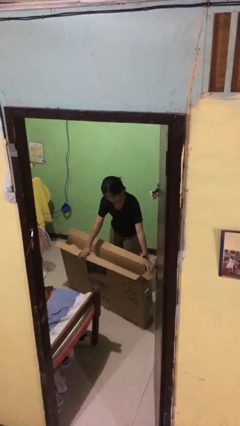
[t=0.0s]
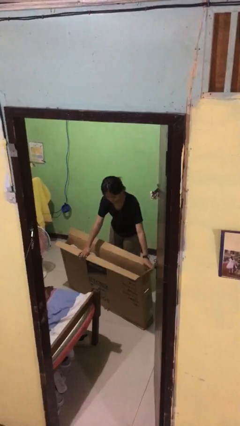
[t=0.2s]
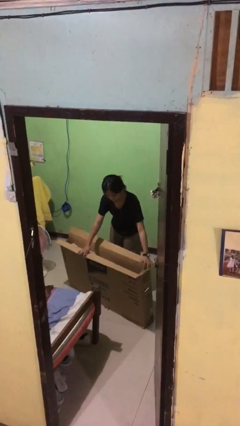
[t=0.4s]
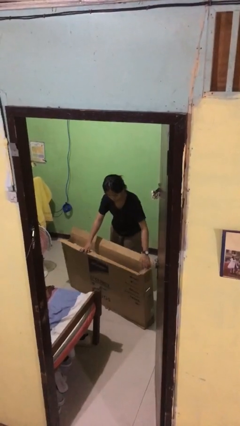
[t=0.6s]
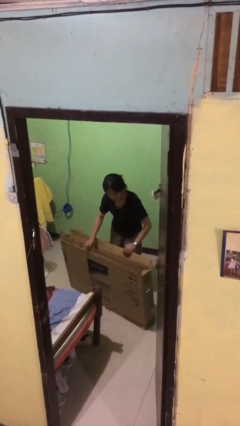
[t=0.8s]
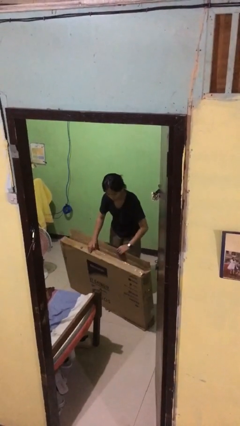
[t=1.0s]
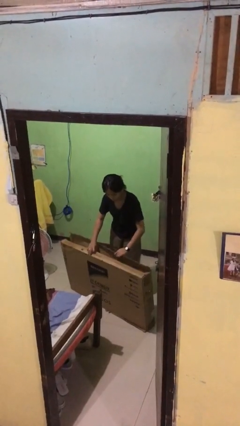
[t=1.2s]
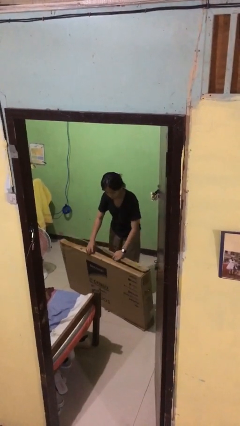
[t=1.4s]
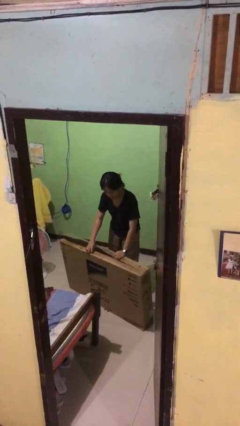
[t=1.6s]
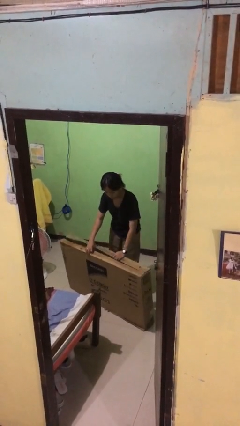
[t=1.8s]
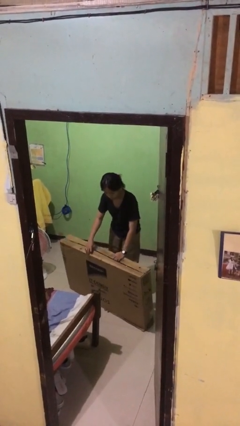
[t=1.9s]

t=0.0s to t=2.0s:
person closes box

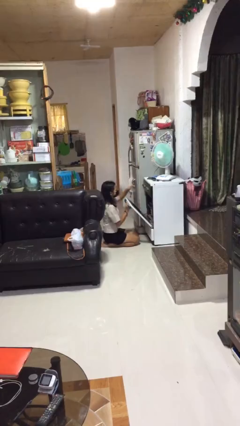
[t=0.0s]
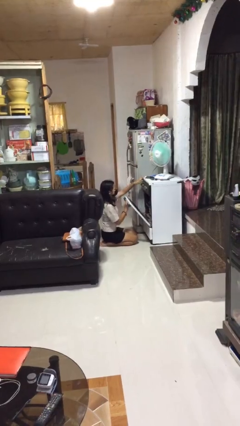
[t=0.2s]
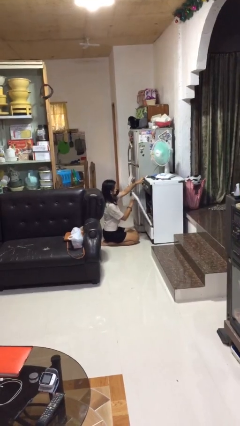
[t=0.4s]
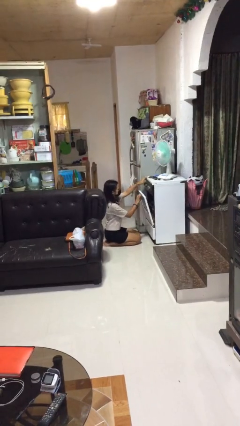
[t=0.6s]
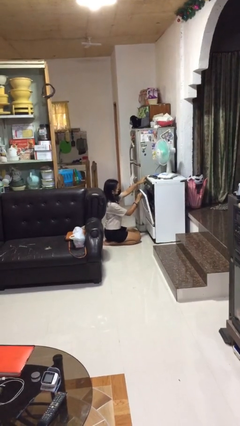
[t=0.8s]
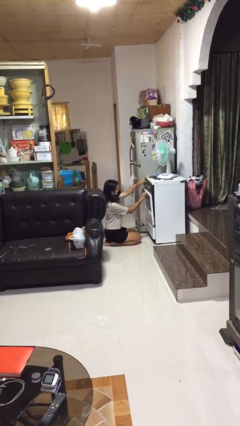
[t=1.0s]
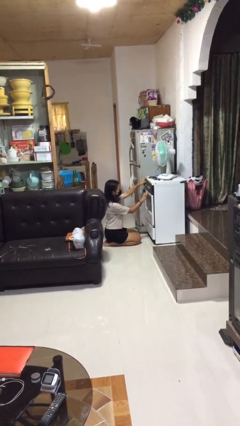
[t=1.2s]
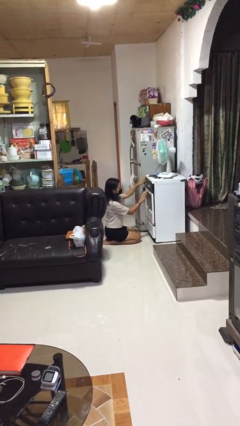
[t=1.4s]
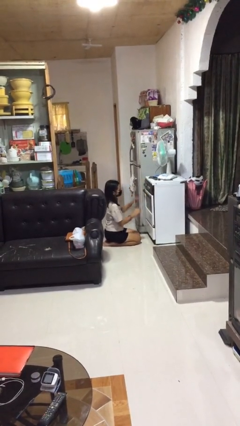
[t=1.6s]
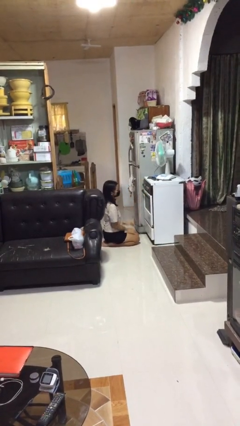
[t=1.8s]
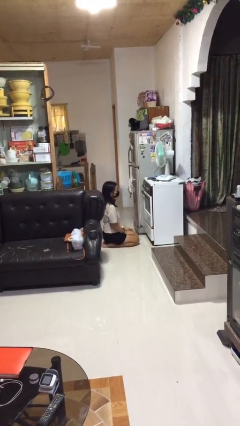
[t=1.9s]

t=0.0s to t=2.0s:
person closes oven door

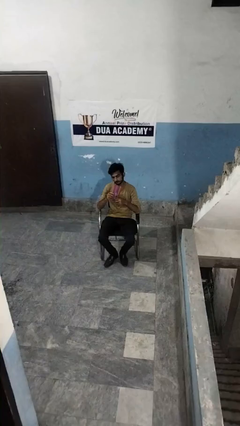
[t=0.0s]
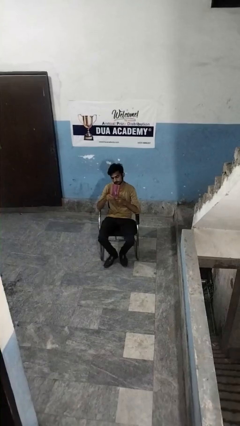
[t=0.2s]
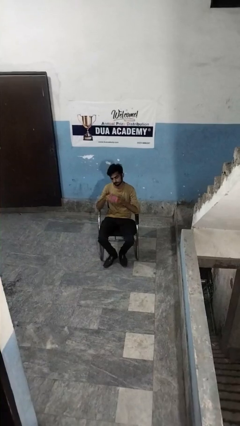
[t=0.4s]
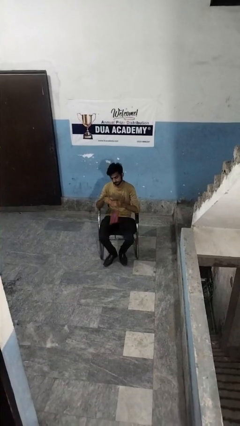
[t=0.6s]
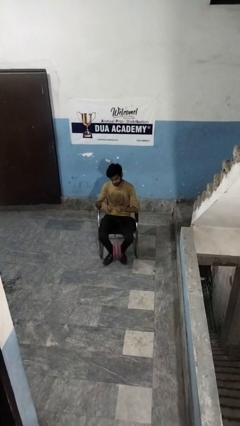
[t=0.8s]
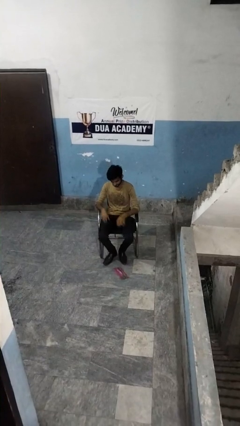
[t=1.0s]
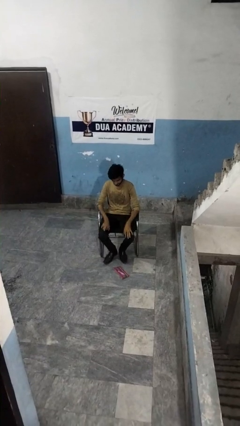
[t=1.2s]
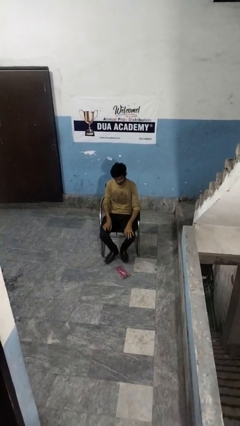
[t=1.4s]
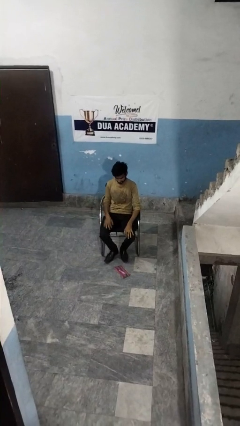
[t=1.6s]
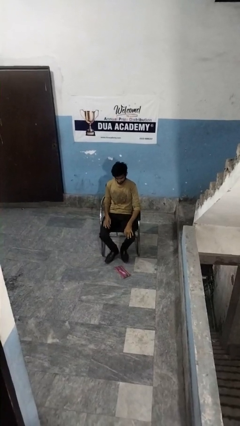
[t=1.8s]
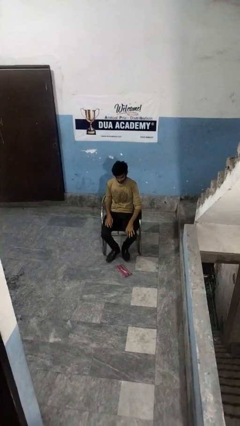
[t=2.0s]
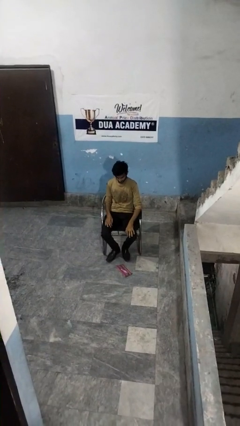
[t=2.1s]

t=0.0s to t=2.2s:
person drops object

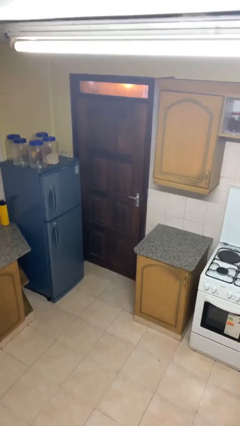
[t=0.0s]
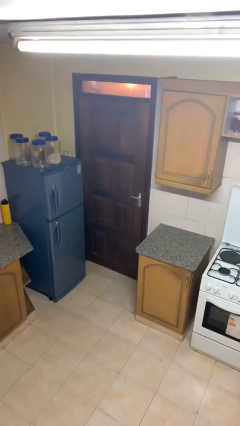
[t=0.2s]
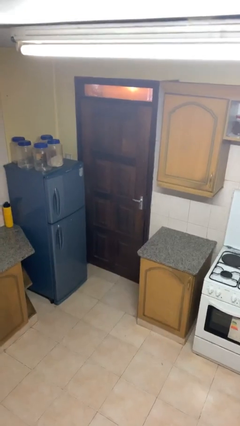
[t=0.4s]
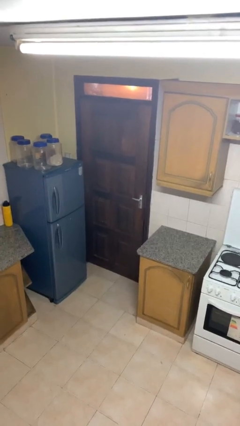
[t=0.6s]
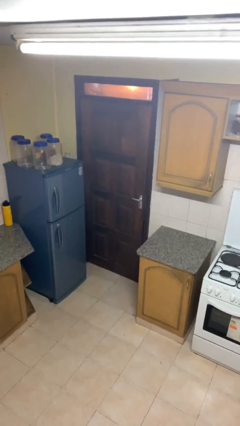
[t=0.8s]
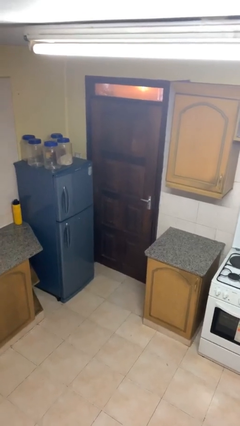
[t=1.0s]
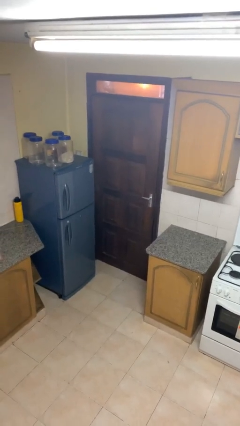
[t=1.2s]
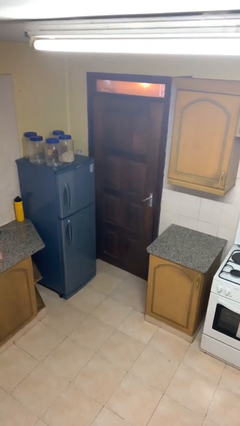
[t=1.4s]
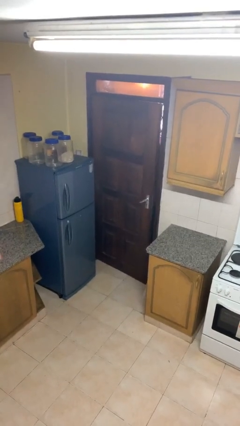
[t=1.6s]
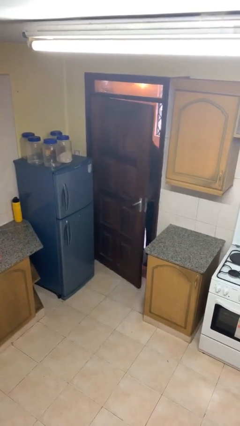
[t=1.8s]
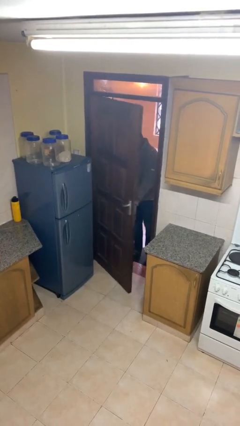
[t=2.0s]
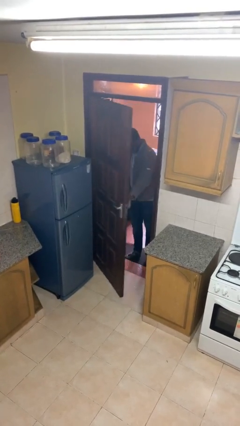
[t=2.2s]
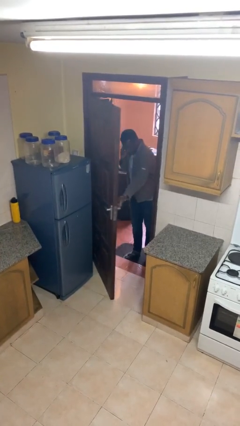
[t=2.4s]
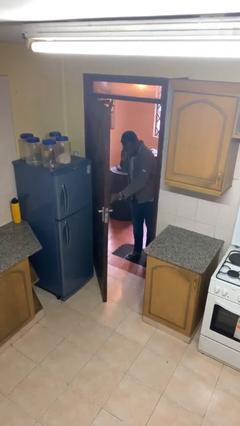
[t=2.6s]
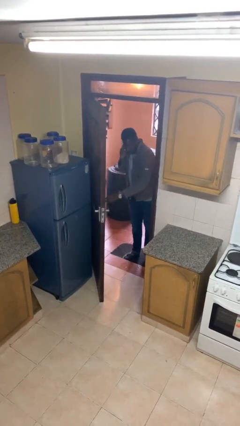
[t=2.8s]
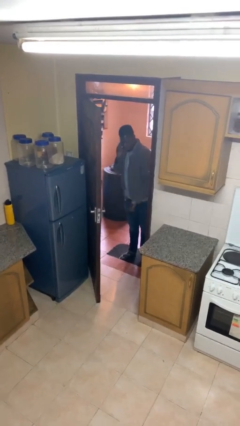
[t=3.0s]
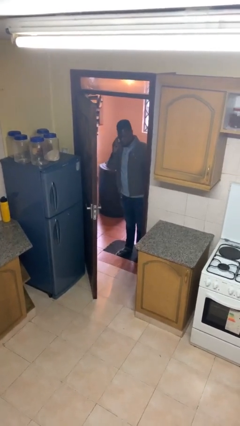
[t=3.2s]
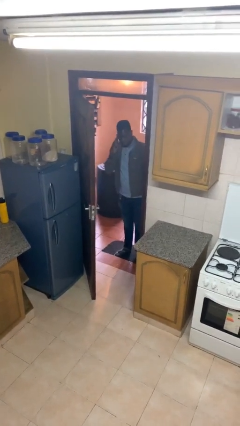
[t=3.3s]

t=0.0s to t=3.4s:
person opens facility door

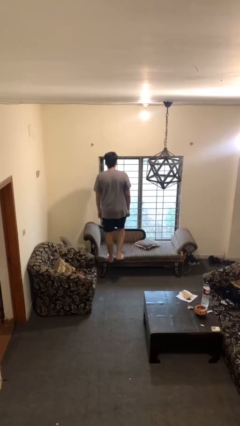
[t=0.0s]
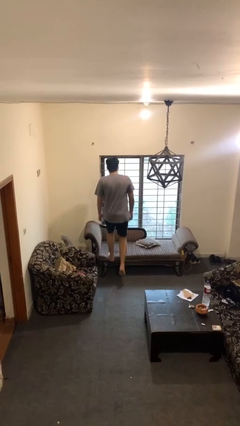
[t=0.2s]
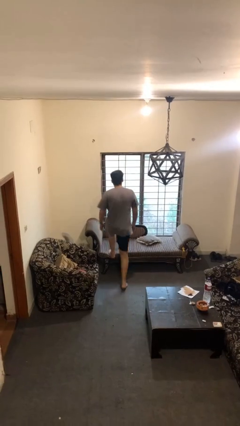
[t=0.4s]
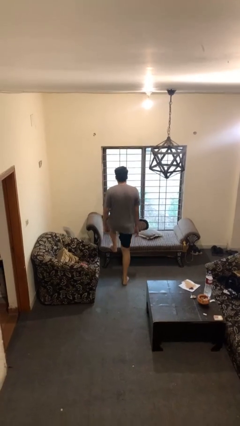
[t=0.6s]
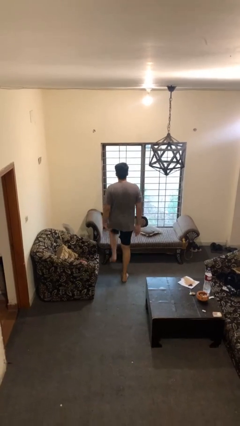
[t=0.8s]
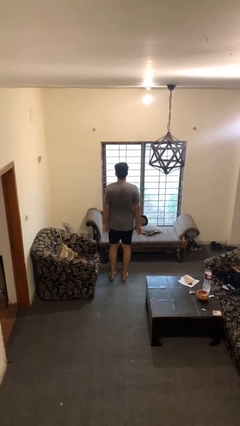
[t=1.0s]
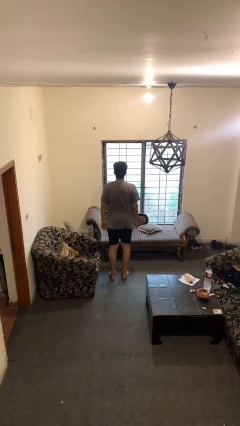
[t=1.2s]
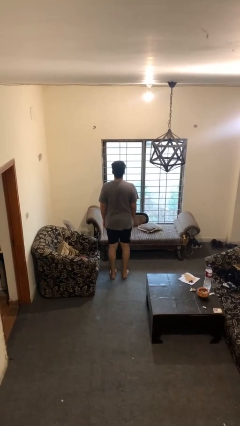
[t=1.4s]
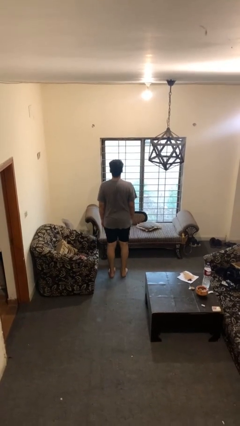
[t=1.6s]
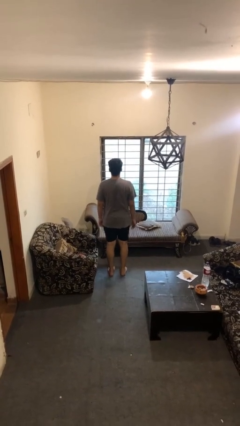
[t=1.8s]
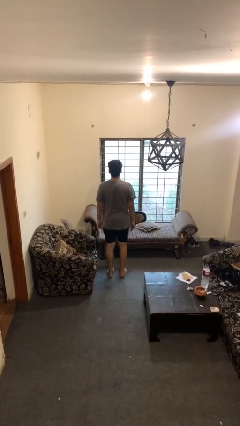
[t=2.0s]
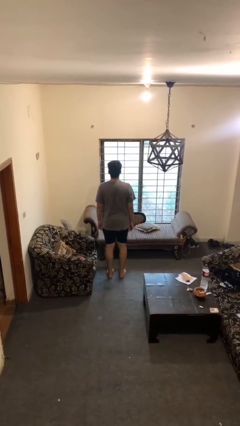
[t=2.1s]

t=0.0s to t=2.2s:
person climbs off couch

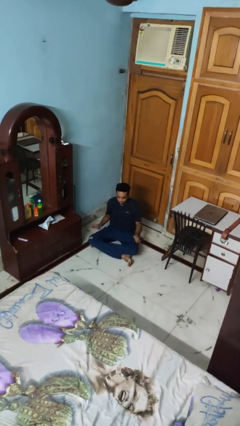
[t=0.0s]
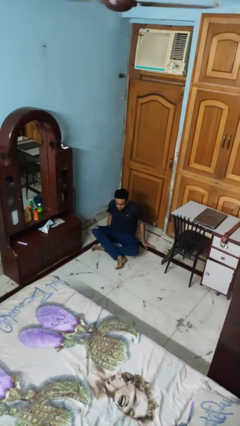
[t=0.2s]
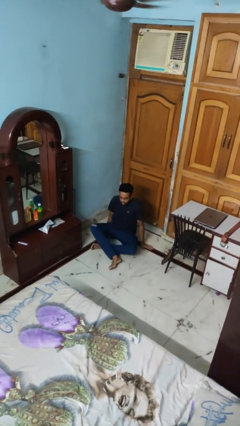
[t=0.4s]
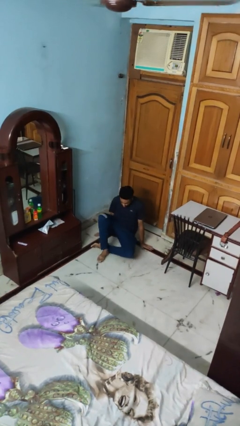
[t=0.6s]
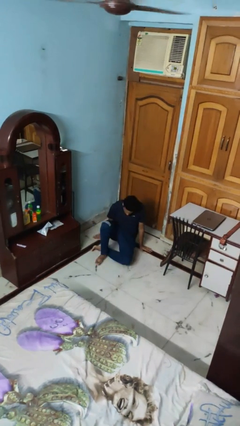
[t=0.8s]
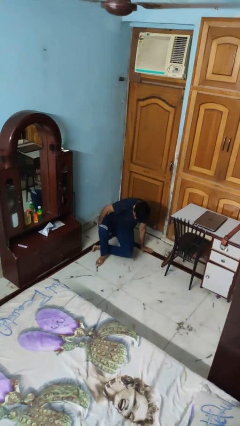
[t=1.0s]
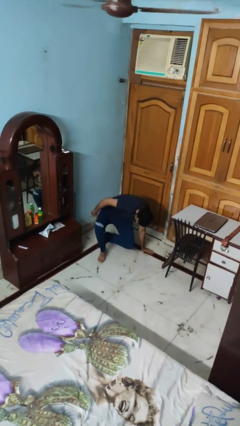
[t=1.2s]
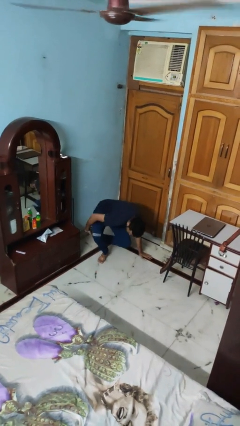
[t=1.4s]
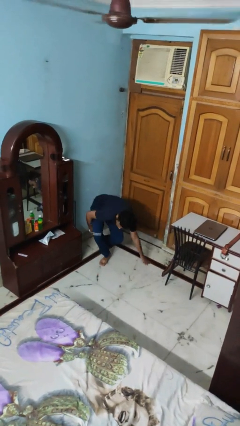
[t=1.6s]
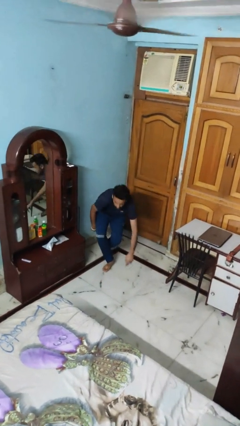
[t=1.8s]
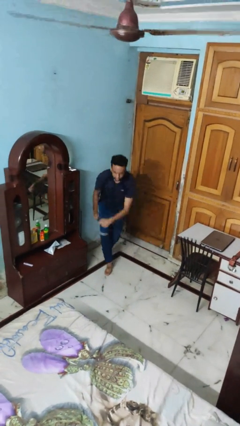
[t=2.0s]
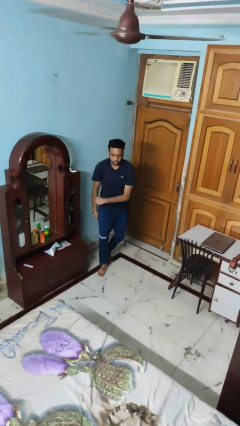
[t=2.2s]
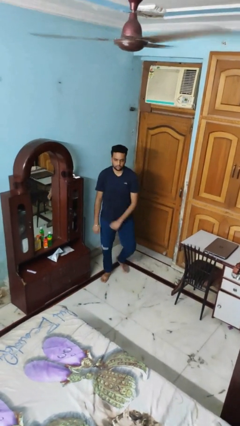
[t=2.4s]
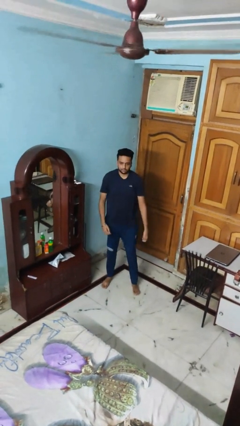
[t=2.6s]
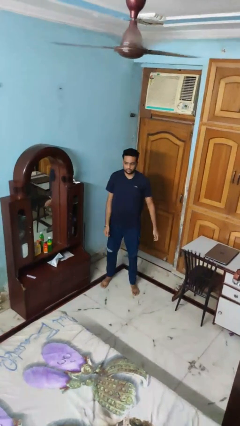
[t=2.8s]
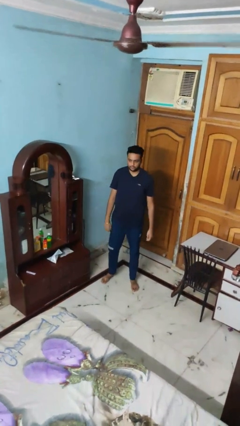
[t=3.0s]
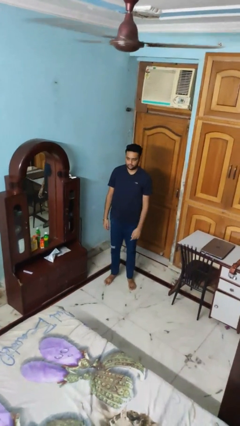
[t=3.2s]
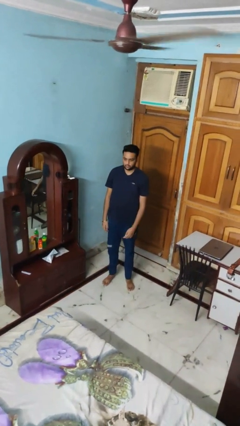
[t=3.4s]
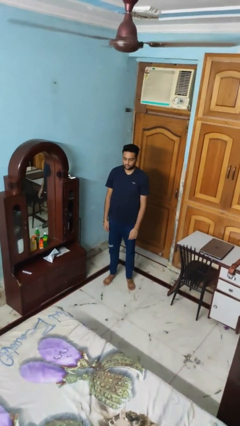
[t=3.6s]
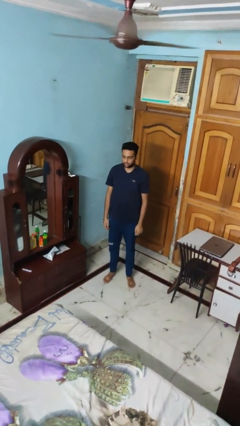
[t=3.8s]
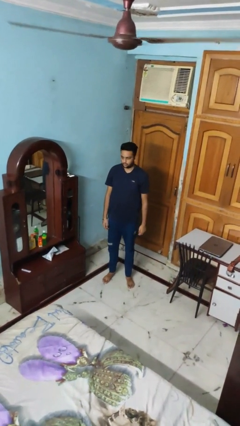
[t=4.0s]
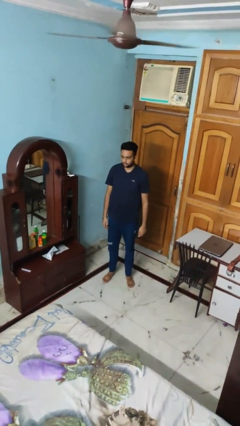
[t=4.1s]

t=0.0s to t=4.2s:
person stands up from floor

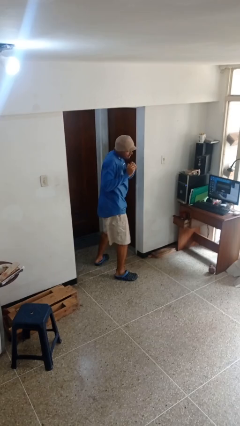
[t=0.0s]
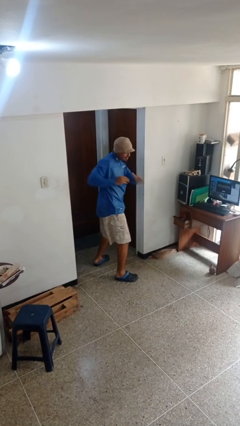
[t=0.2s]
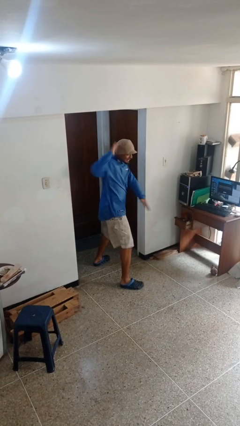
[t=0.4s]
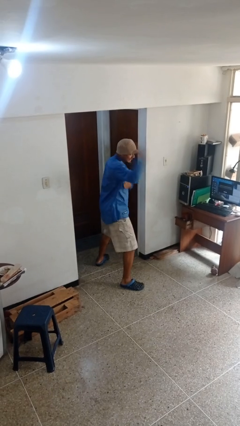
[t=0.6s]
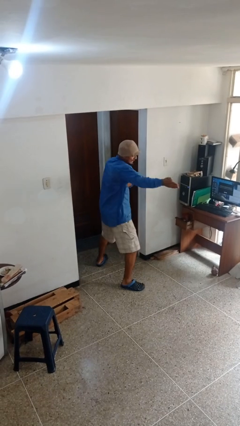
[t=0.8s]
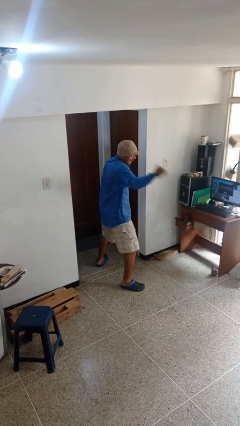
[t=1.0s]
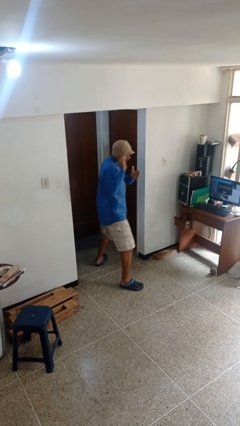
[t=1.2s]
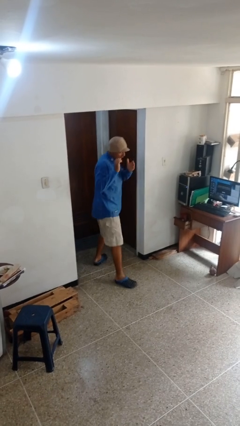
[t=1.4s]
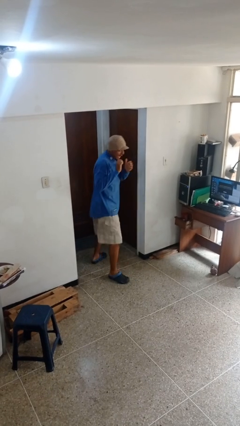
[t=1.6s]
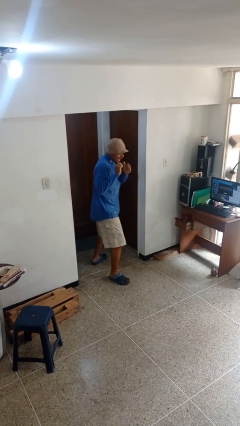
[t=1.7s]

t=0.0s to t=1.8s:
person karate chop
